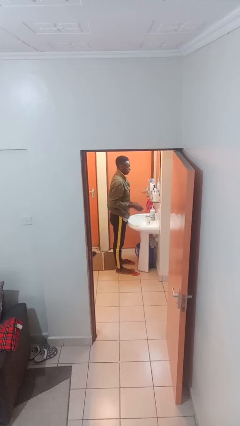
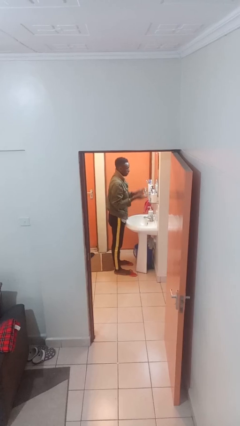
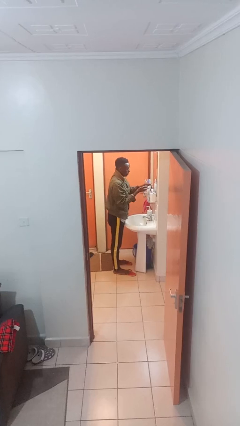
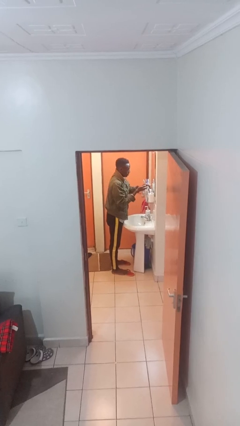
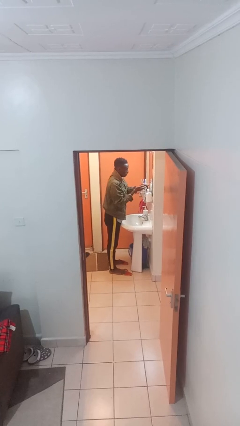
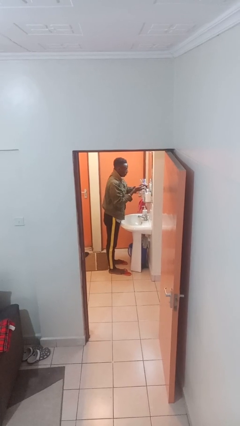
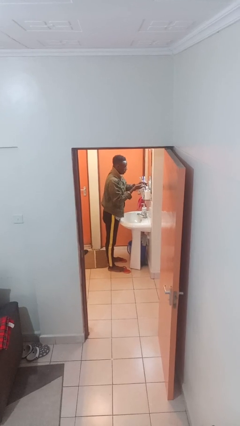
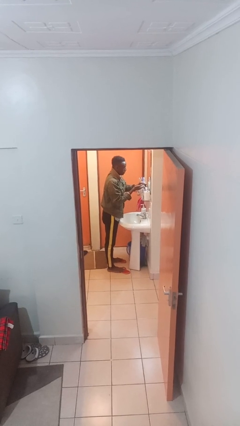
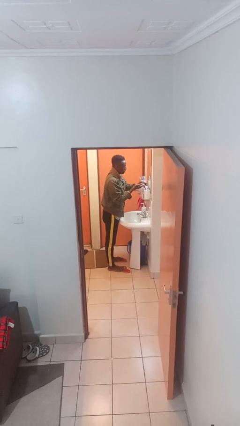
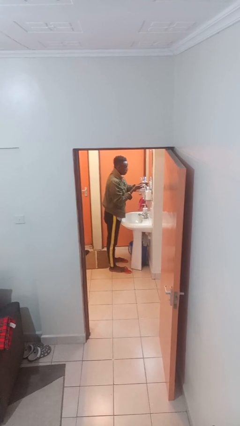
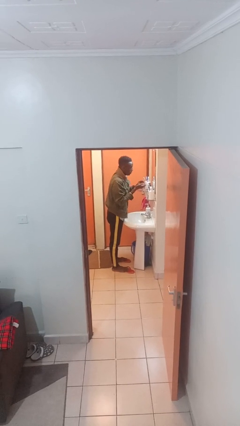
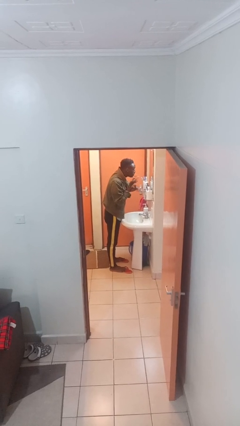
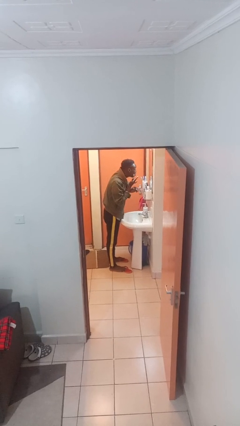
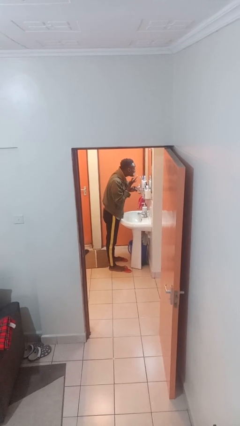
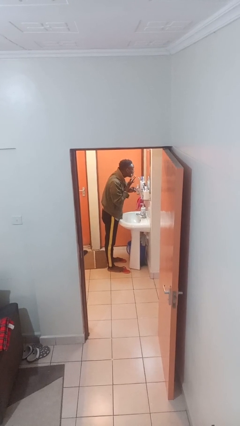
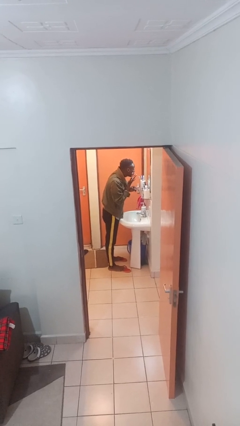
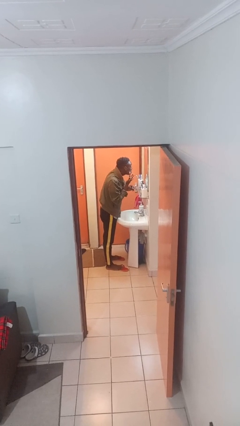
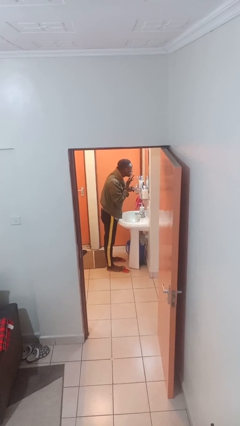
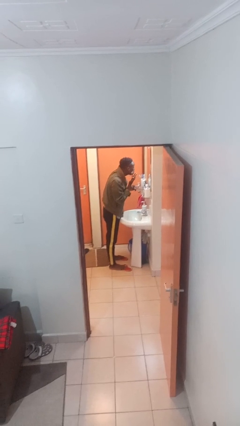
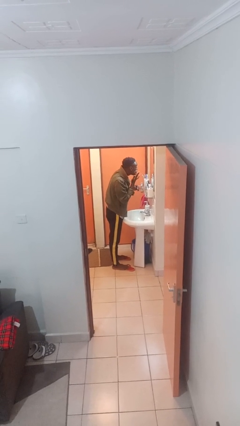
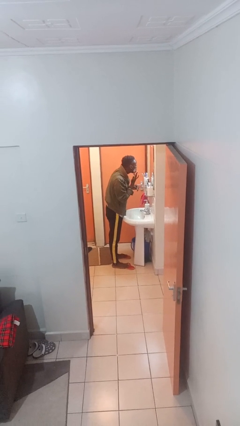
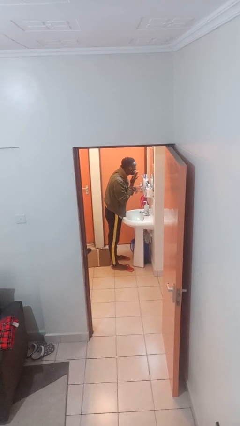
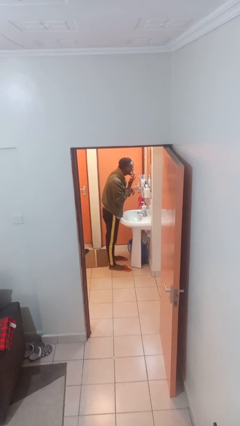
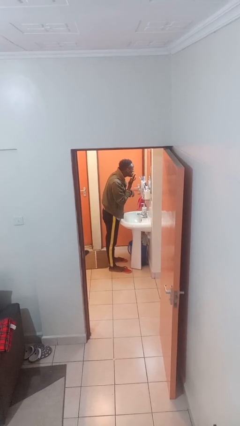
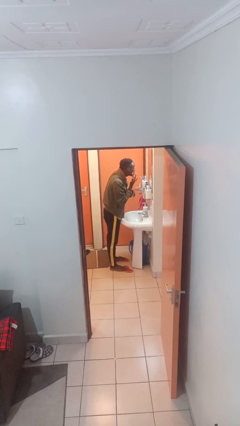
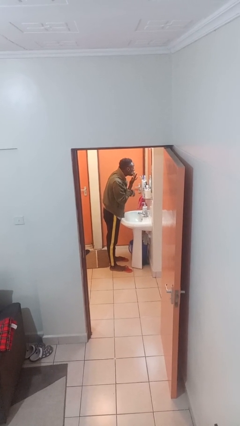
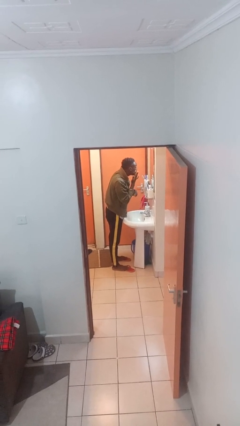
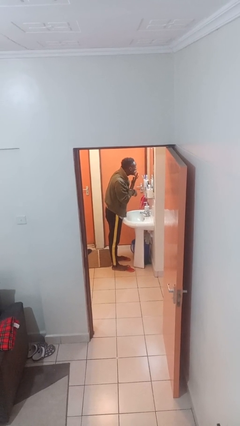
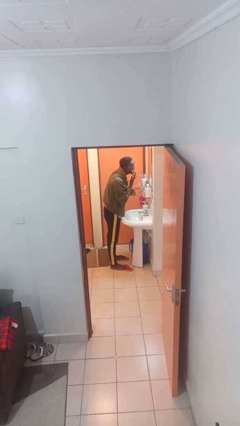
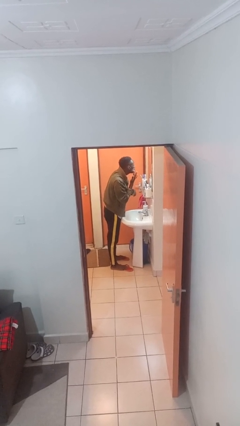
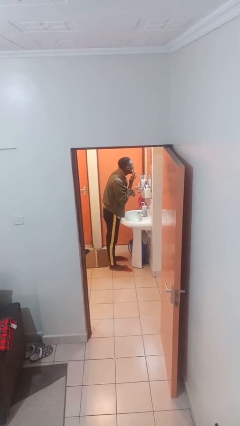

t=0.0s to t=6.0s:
person applies shaving cream

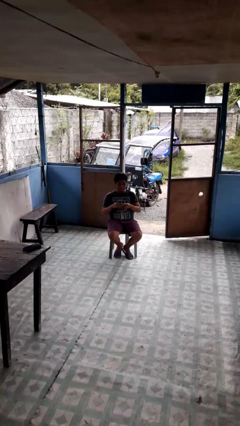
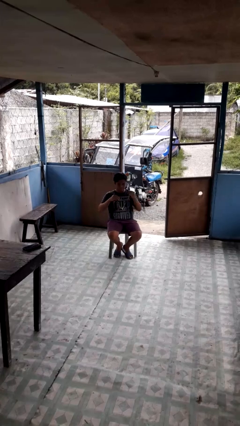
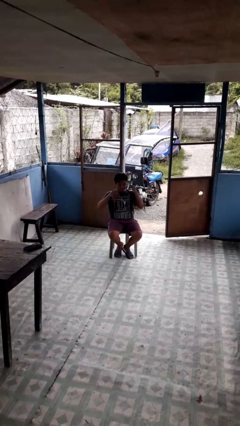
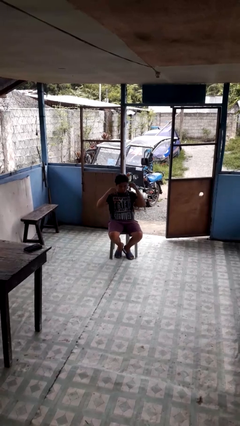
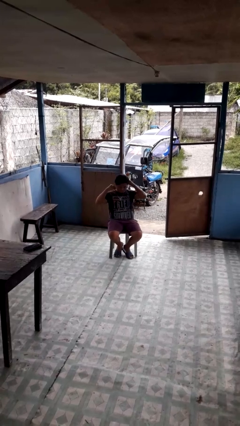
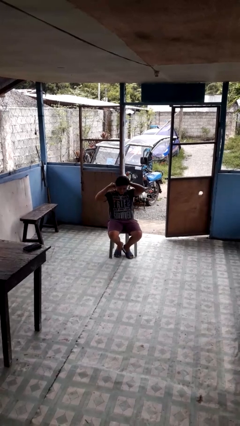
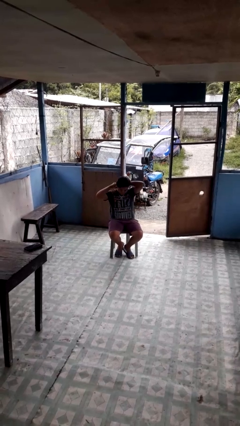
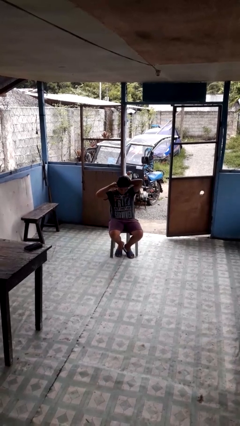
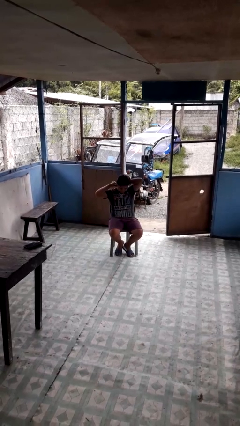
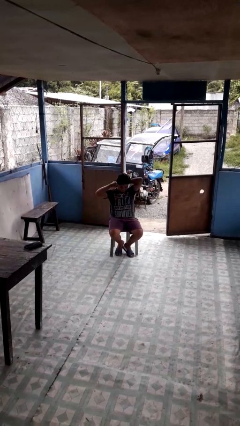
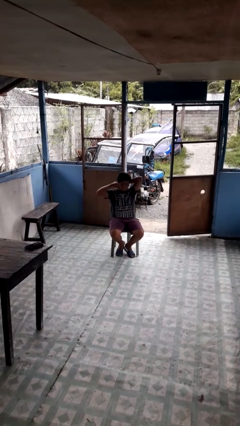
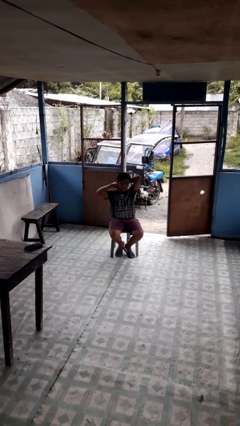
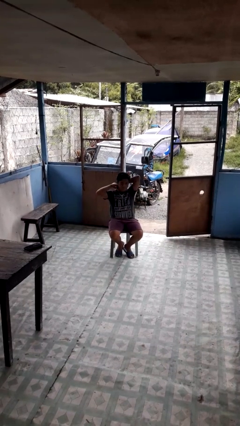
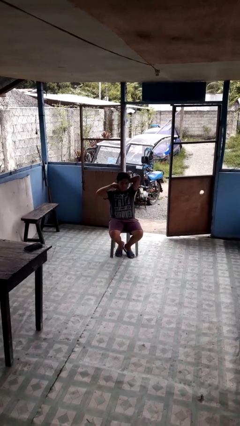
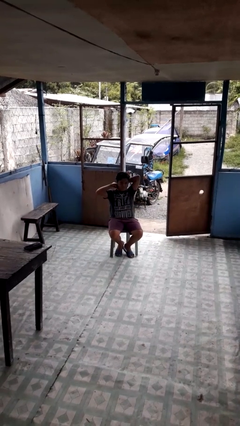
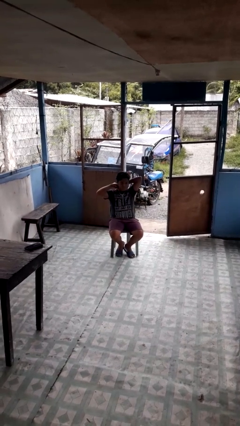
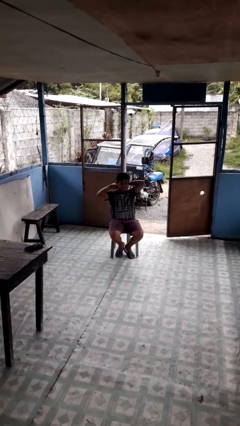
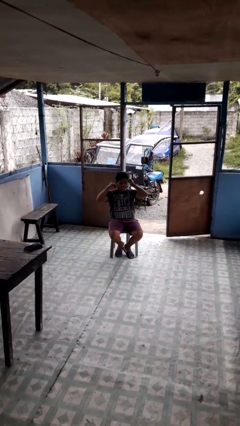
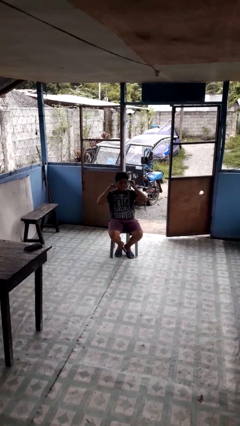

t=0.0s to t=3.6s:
person puts on necklace

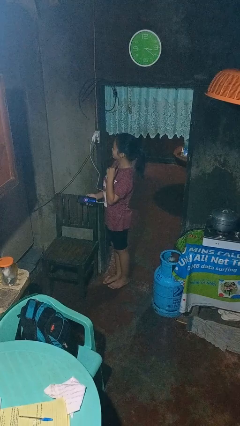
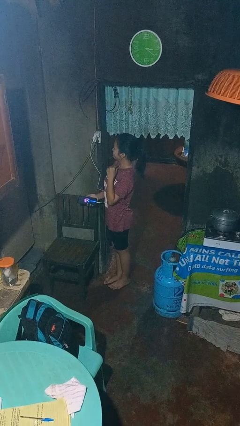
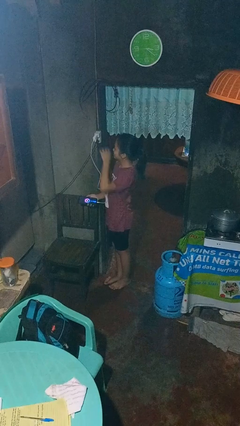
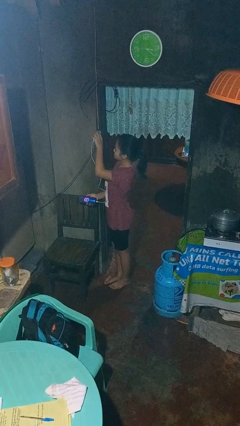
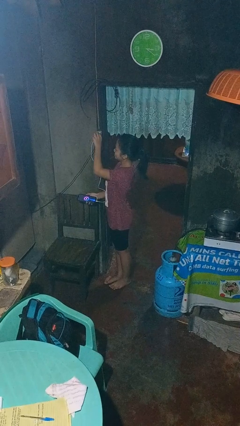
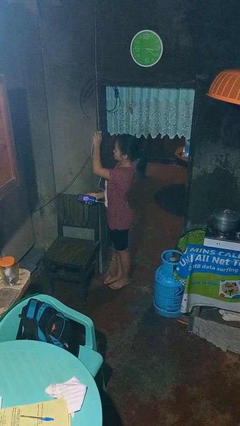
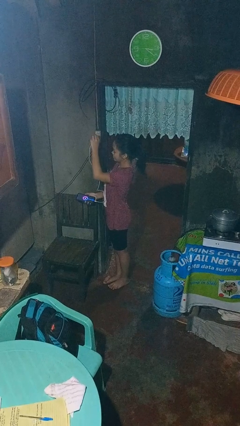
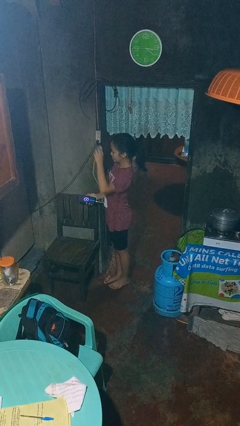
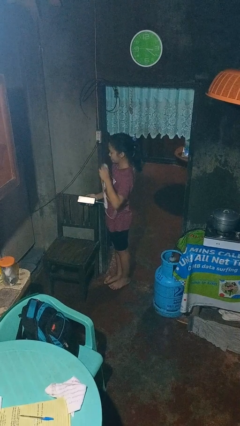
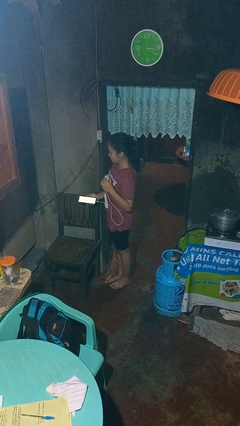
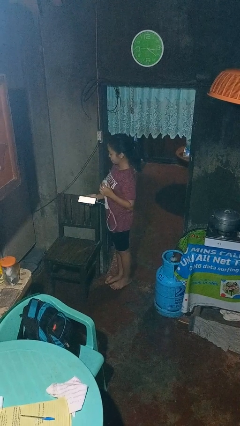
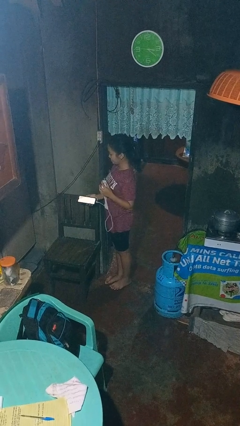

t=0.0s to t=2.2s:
person unplugs from electrical socket

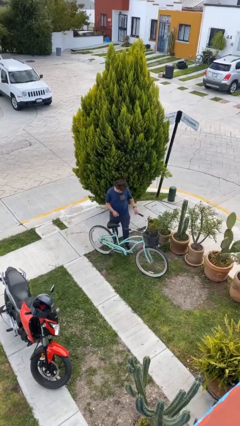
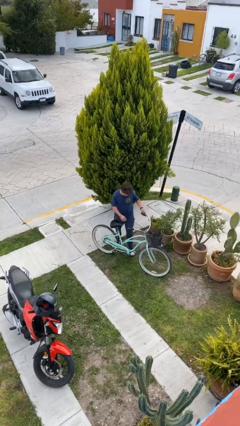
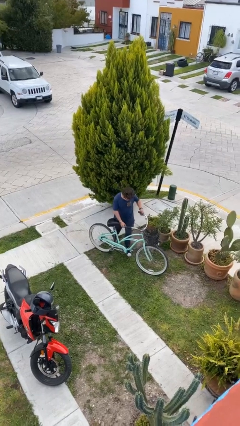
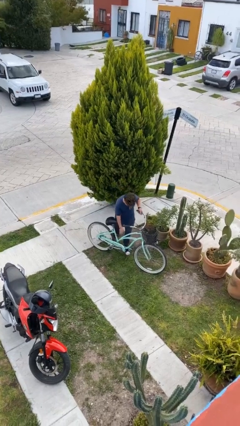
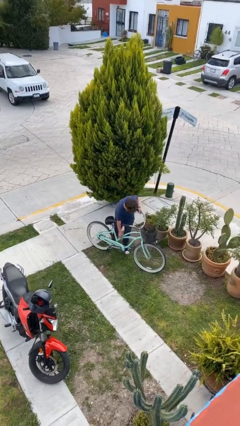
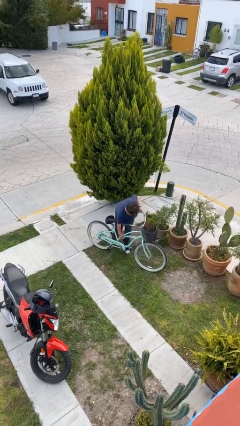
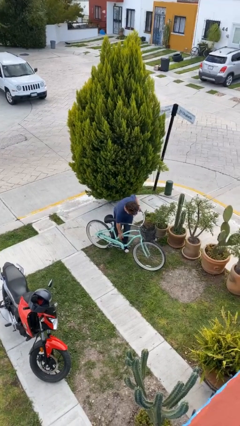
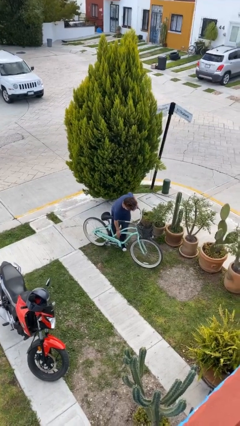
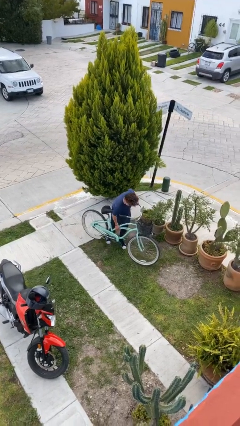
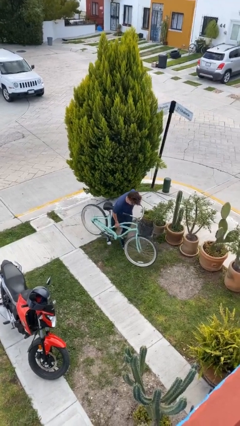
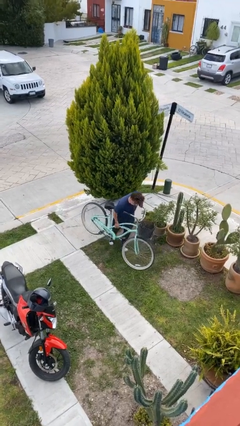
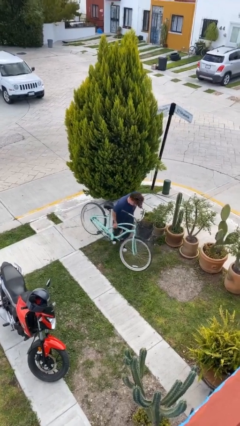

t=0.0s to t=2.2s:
person picks up object from floor

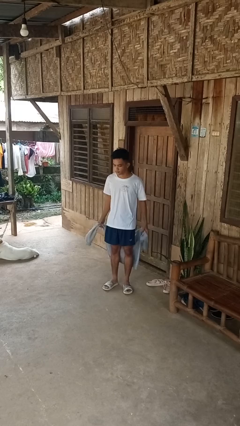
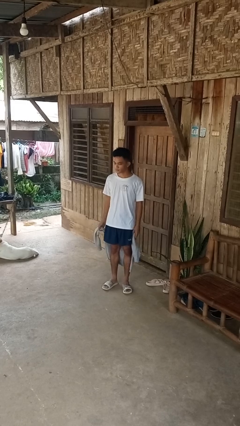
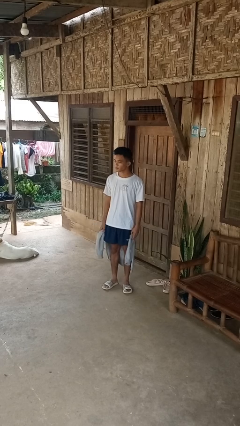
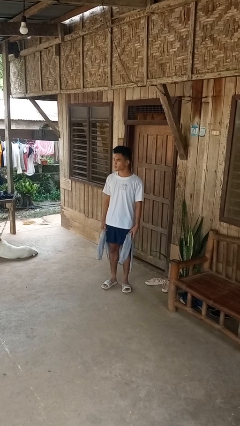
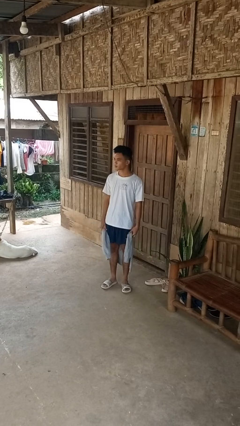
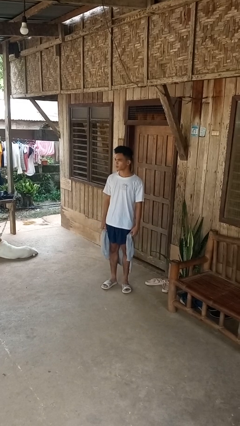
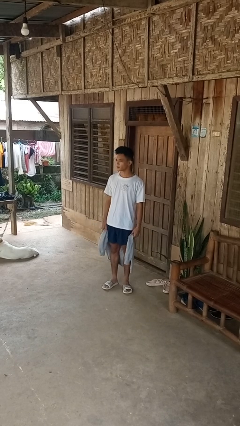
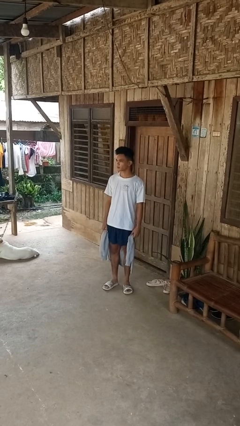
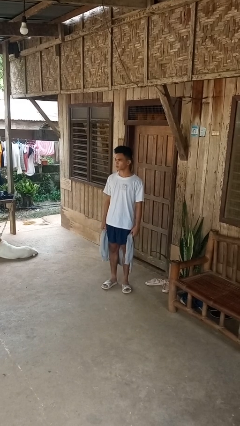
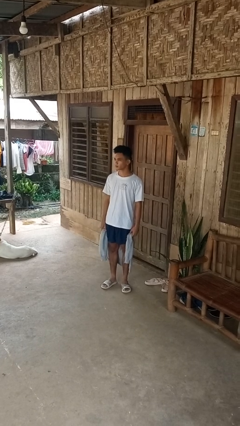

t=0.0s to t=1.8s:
person unties jacket around waist

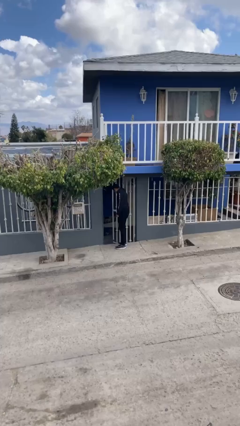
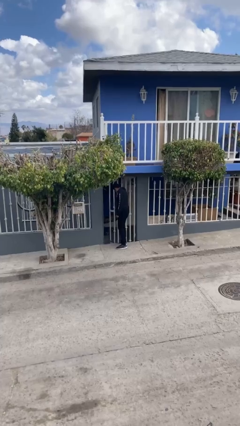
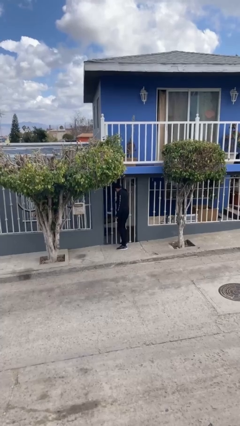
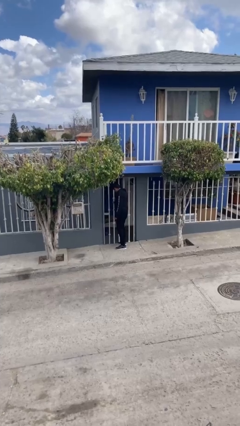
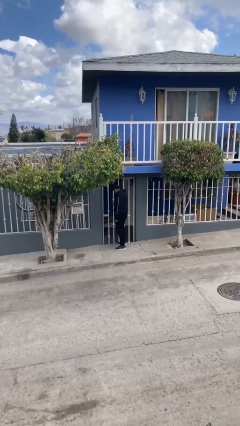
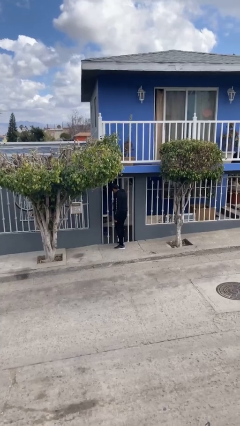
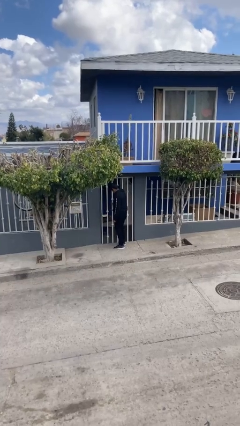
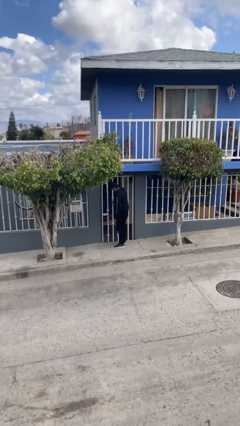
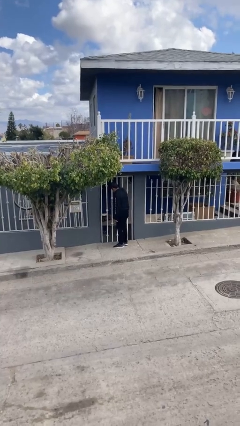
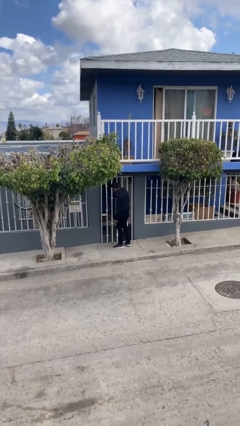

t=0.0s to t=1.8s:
person closes facility door
